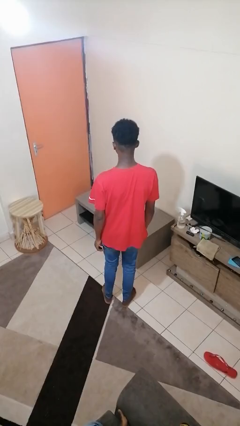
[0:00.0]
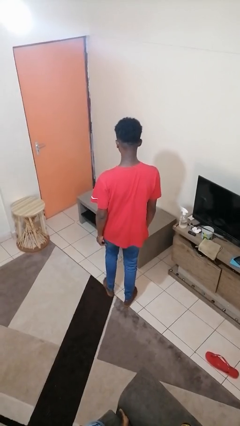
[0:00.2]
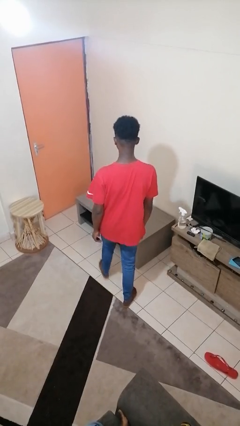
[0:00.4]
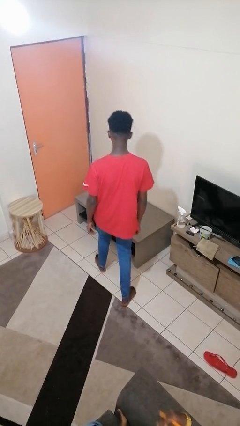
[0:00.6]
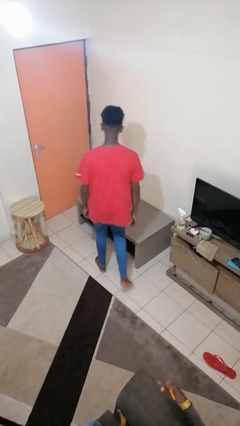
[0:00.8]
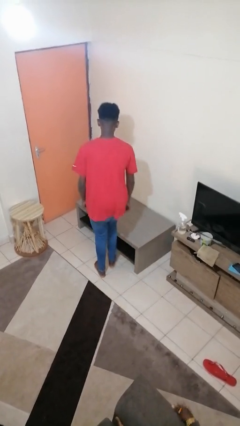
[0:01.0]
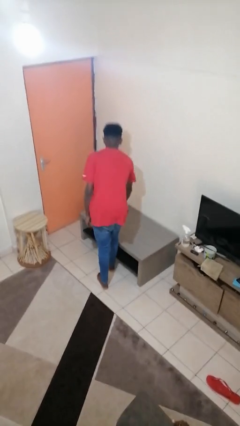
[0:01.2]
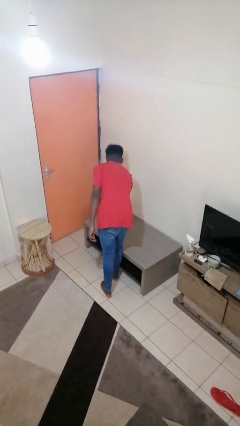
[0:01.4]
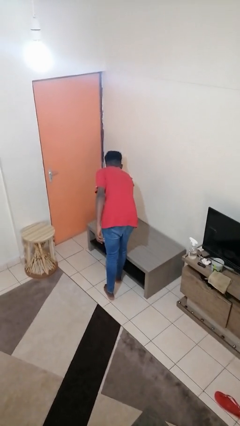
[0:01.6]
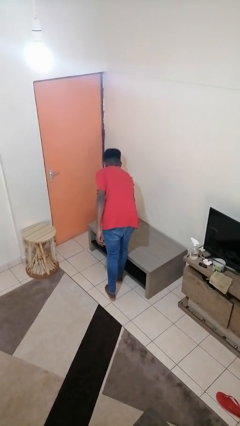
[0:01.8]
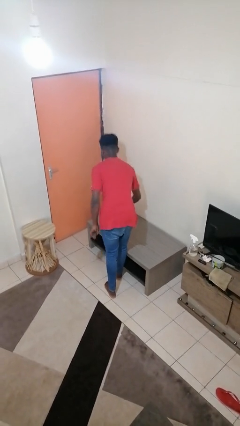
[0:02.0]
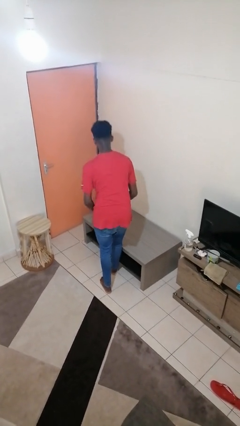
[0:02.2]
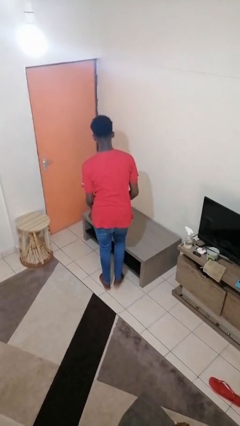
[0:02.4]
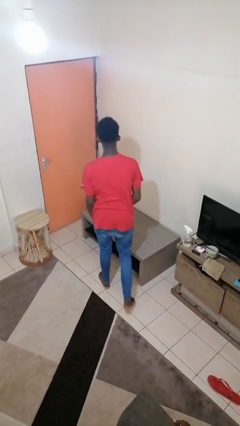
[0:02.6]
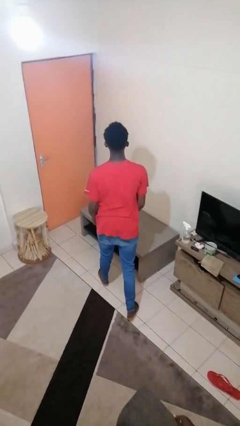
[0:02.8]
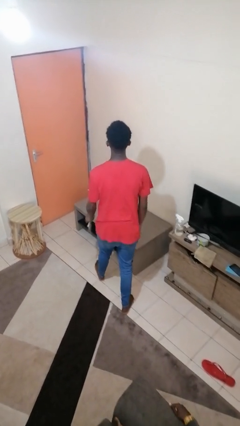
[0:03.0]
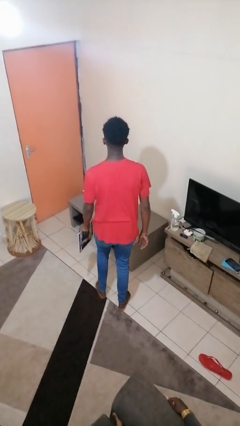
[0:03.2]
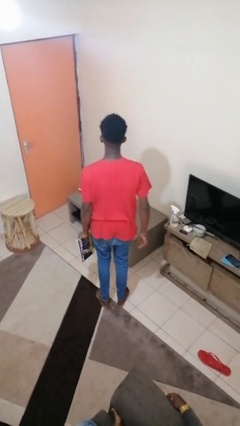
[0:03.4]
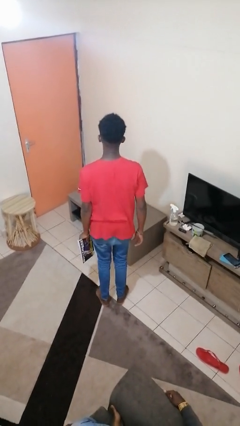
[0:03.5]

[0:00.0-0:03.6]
person picks up object from table

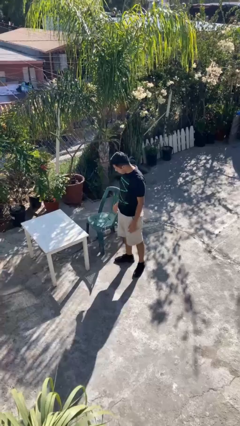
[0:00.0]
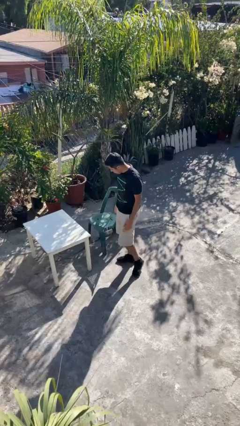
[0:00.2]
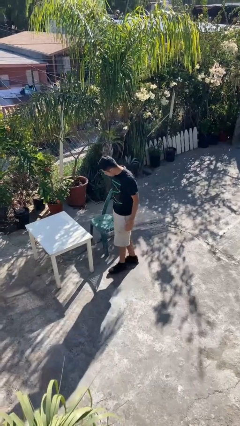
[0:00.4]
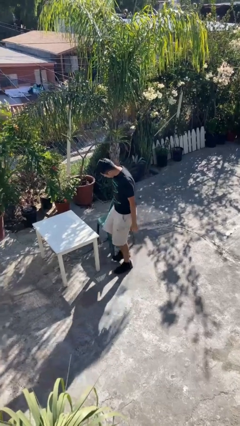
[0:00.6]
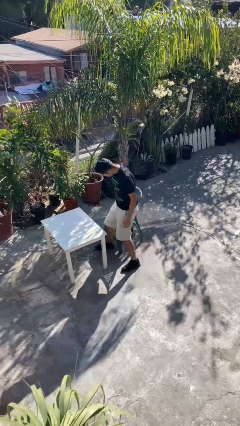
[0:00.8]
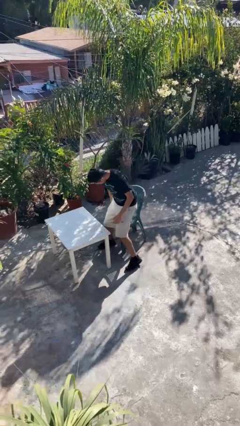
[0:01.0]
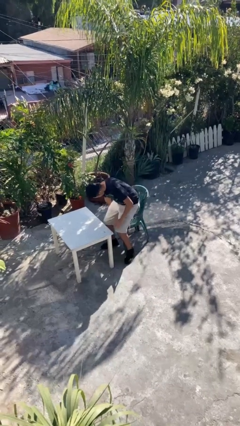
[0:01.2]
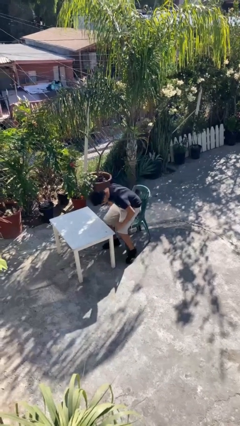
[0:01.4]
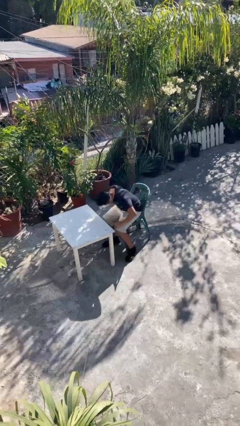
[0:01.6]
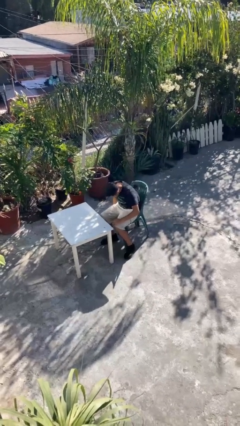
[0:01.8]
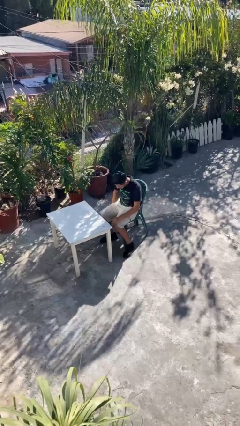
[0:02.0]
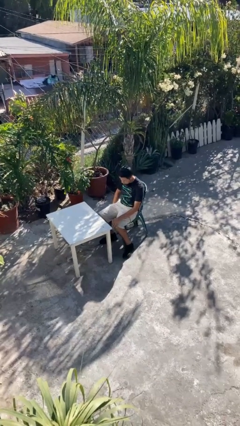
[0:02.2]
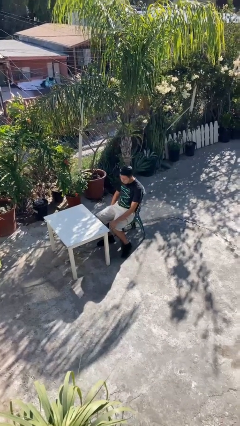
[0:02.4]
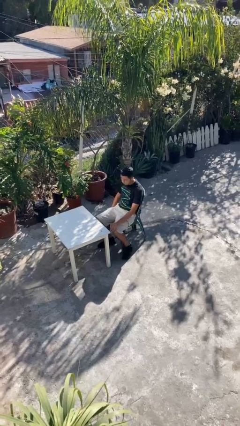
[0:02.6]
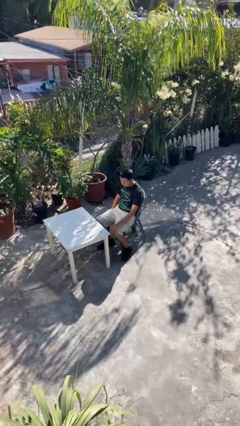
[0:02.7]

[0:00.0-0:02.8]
person sits down

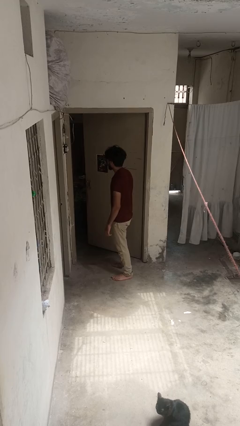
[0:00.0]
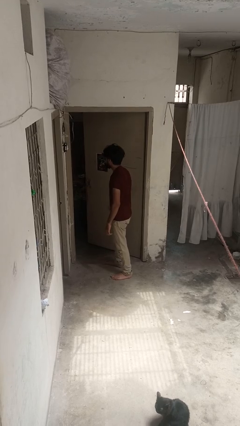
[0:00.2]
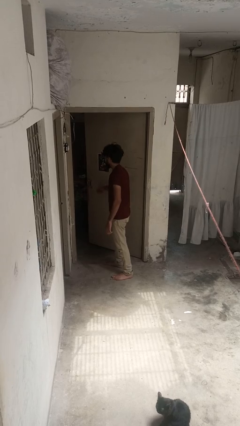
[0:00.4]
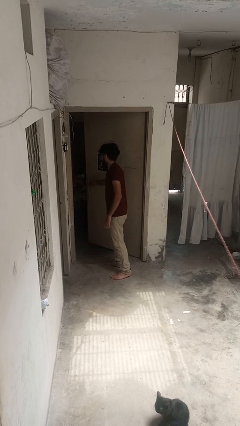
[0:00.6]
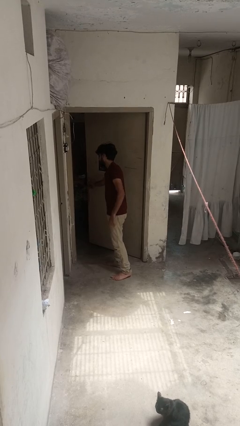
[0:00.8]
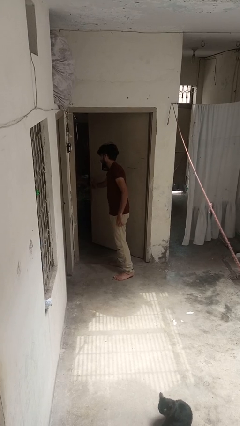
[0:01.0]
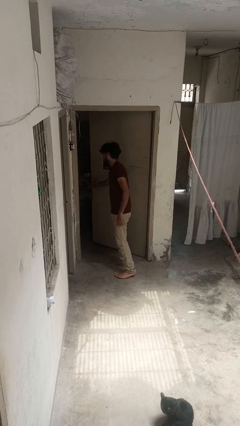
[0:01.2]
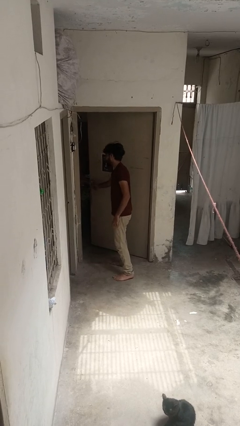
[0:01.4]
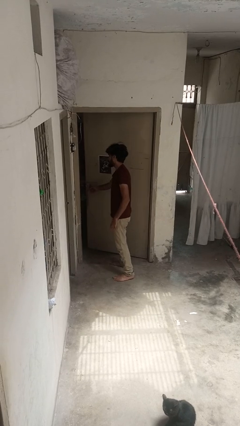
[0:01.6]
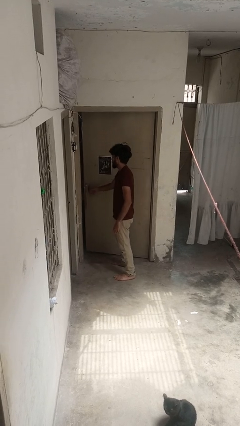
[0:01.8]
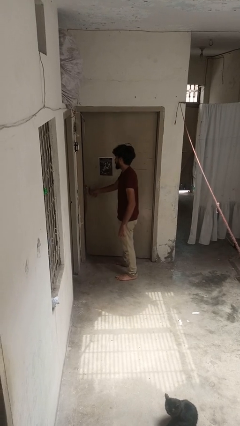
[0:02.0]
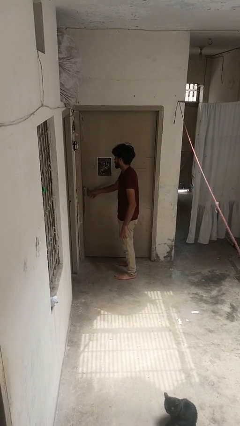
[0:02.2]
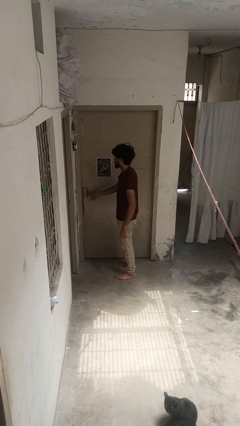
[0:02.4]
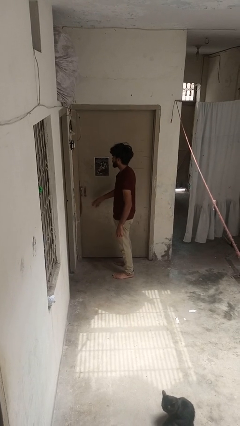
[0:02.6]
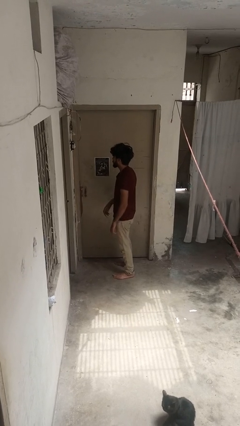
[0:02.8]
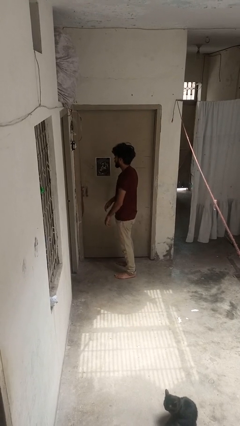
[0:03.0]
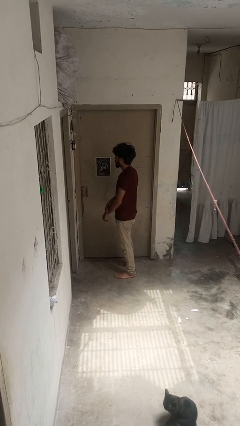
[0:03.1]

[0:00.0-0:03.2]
person closes door with hip

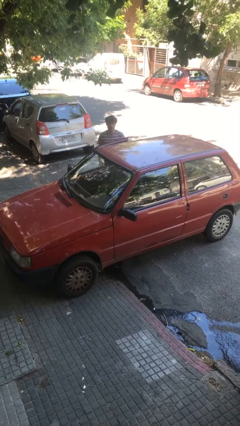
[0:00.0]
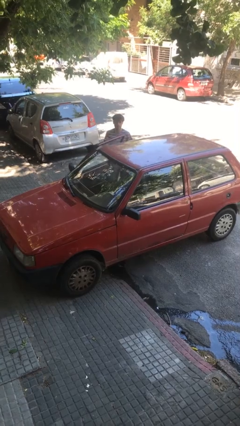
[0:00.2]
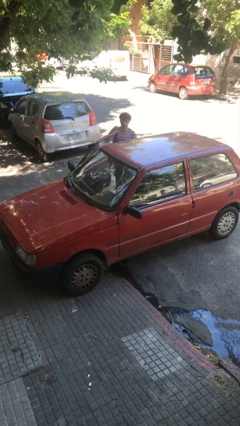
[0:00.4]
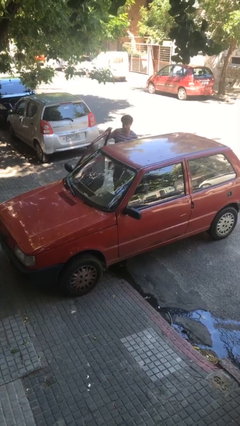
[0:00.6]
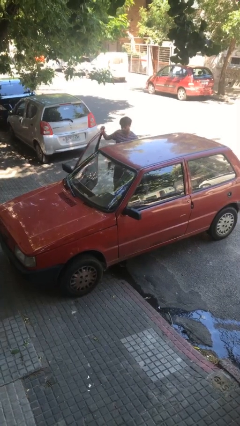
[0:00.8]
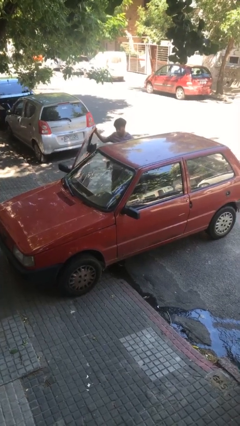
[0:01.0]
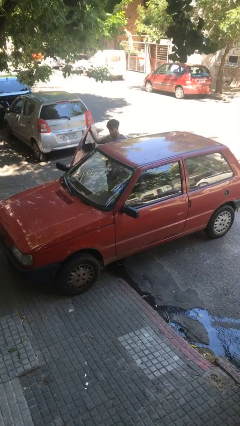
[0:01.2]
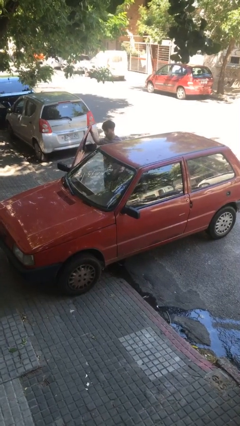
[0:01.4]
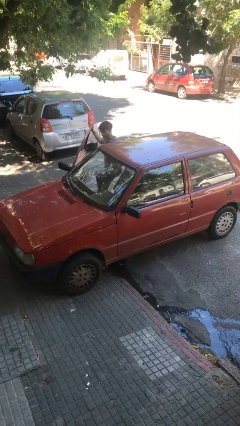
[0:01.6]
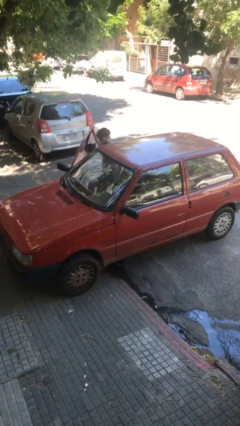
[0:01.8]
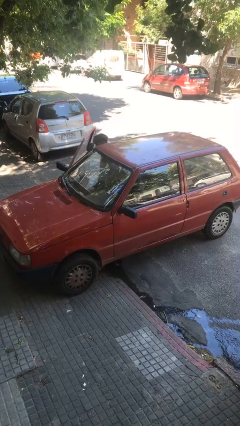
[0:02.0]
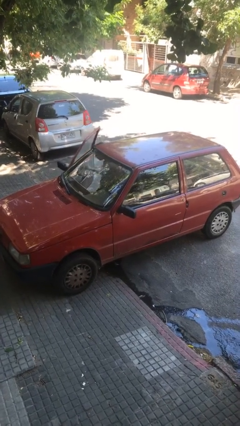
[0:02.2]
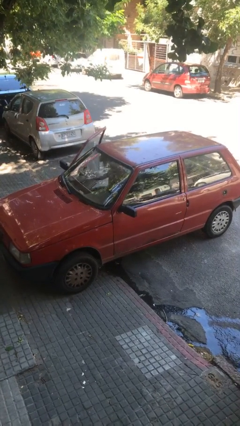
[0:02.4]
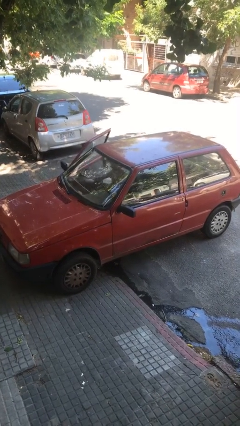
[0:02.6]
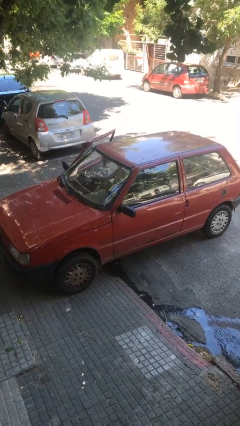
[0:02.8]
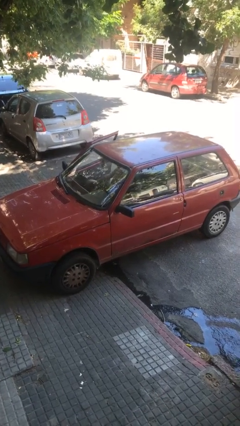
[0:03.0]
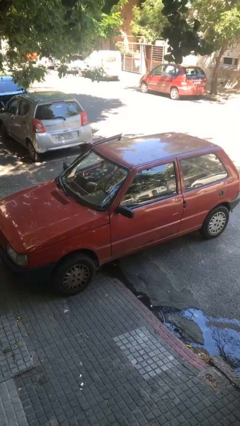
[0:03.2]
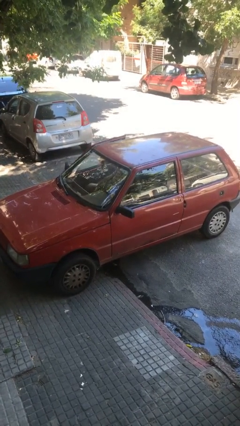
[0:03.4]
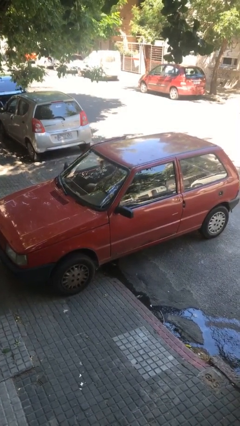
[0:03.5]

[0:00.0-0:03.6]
car picks up person

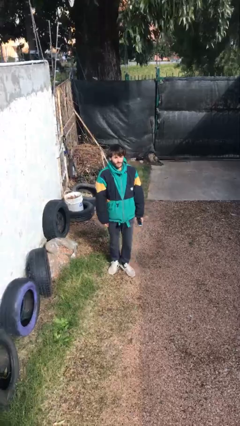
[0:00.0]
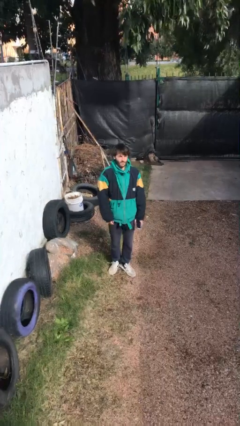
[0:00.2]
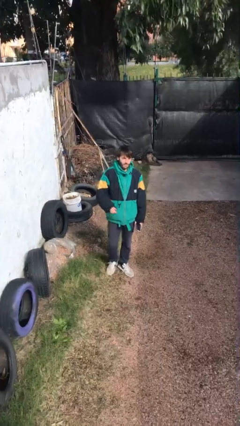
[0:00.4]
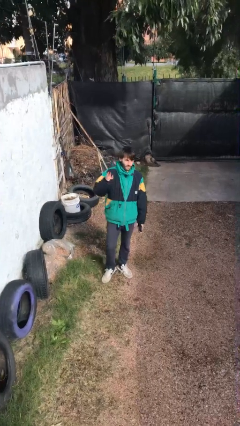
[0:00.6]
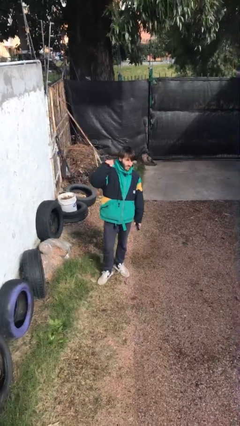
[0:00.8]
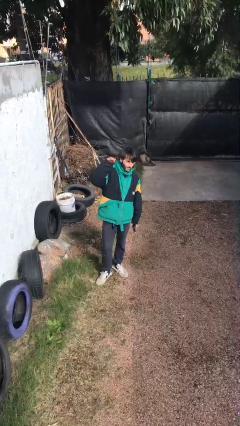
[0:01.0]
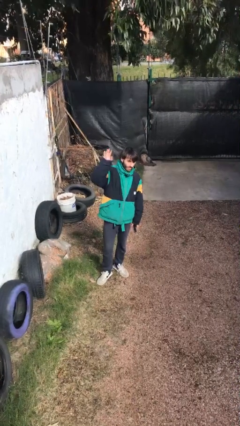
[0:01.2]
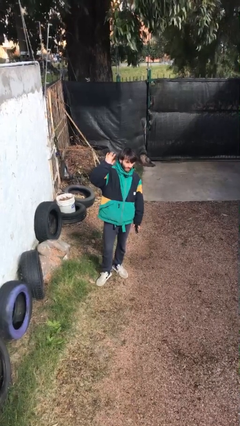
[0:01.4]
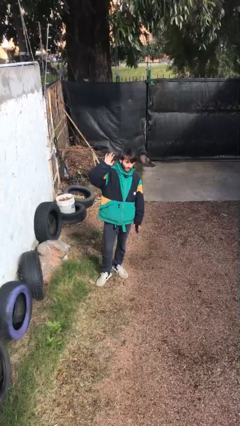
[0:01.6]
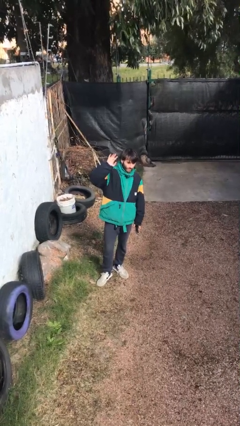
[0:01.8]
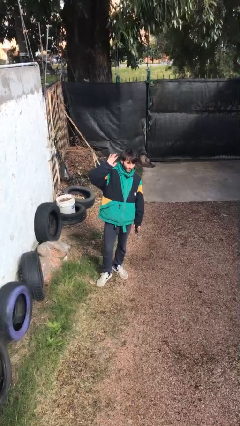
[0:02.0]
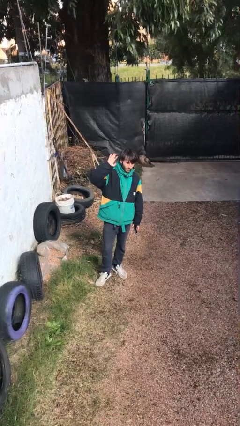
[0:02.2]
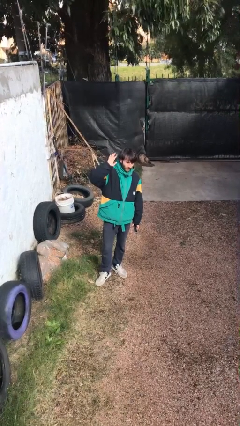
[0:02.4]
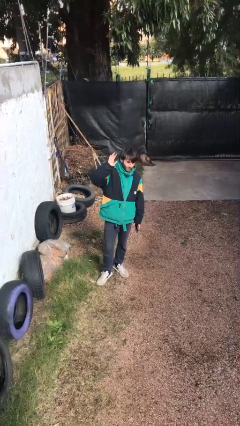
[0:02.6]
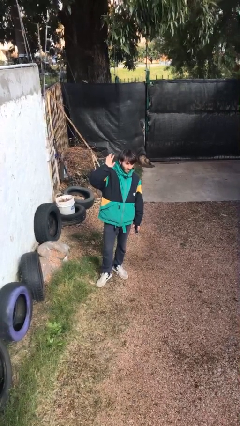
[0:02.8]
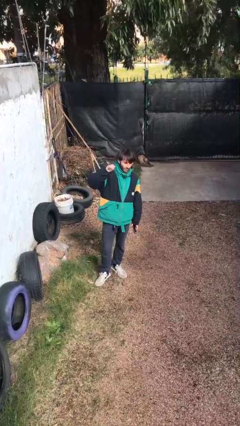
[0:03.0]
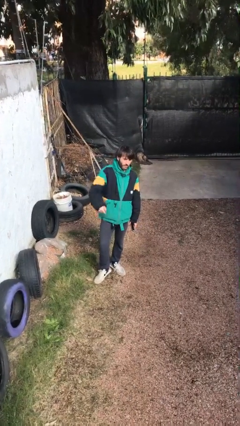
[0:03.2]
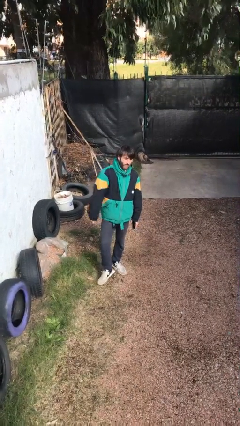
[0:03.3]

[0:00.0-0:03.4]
person waves at person

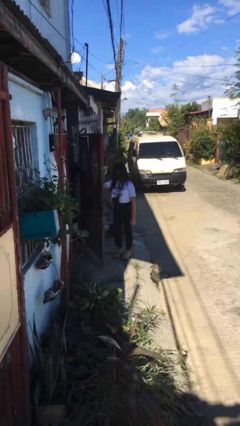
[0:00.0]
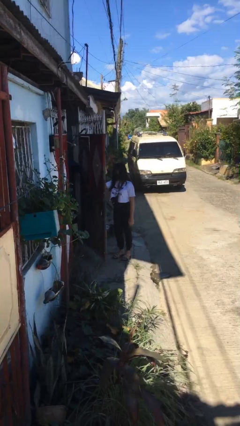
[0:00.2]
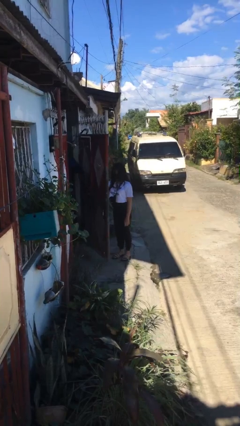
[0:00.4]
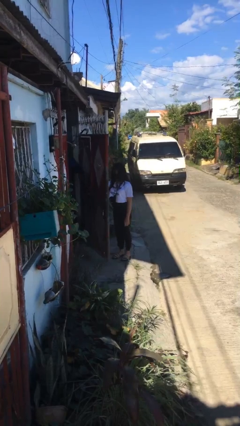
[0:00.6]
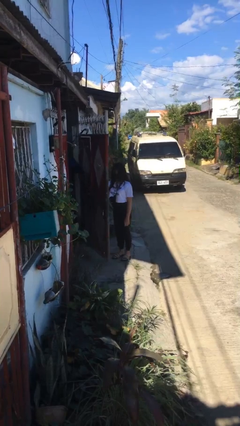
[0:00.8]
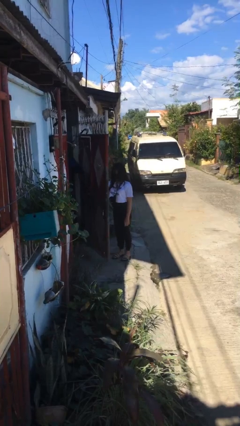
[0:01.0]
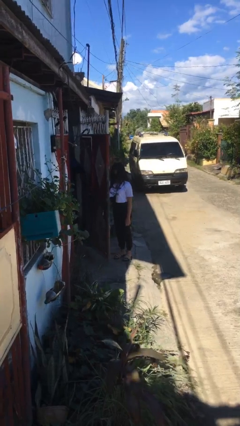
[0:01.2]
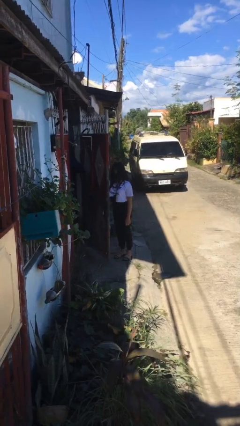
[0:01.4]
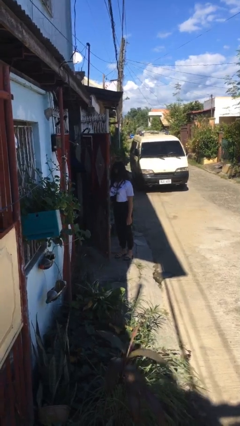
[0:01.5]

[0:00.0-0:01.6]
person opens gate
